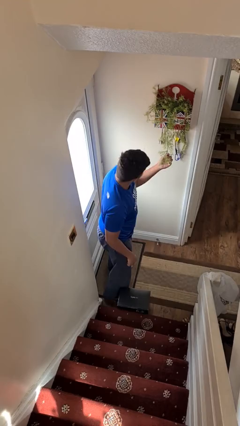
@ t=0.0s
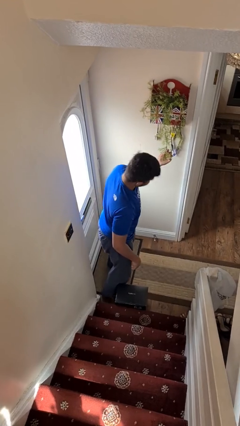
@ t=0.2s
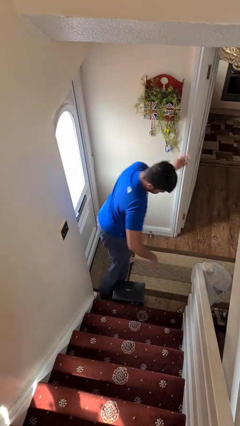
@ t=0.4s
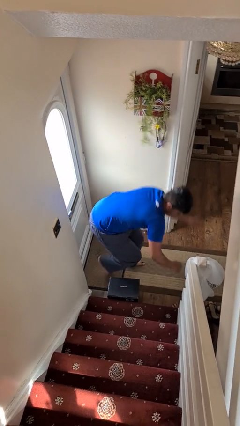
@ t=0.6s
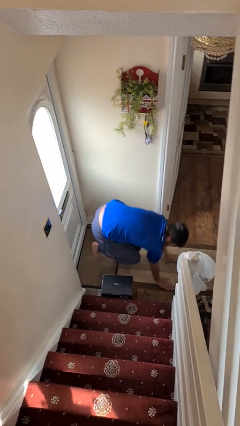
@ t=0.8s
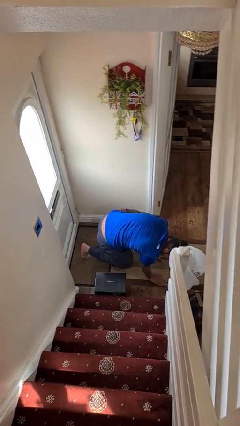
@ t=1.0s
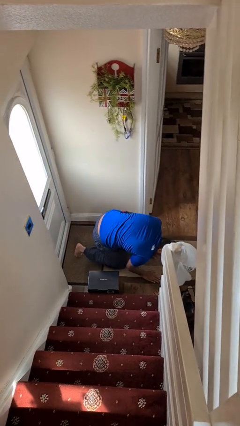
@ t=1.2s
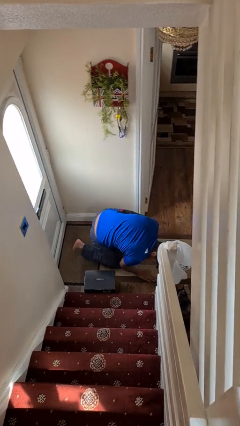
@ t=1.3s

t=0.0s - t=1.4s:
person trips on object on floor

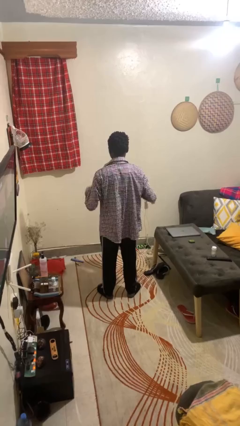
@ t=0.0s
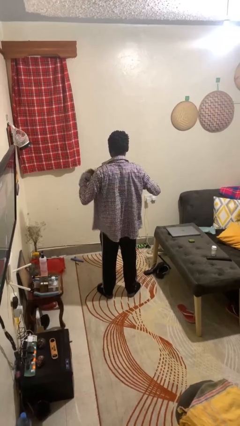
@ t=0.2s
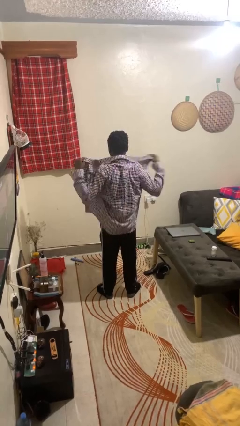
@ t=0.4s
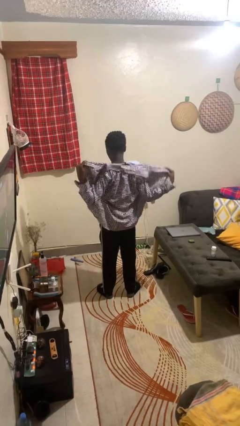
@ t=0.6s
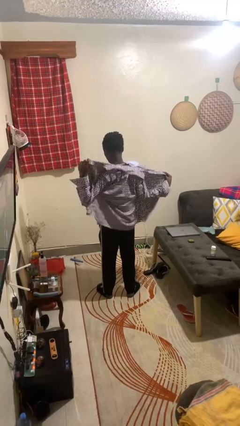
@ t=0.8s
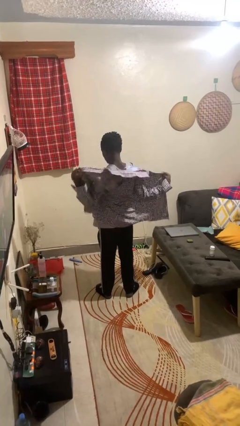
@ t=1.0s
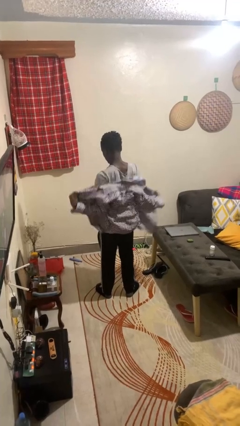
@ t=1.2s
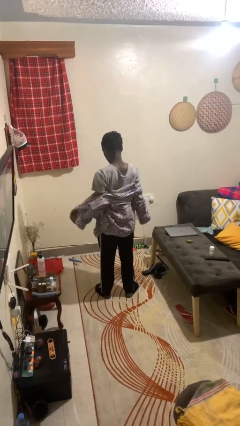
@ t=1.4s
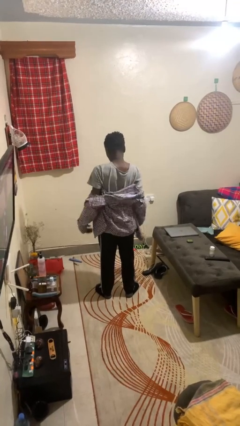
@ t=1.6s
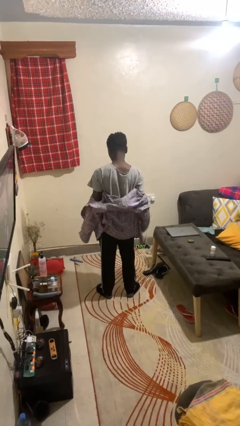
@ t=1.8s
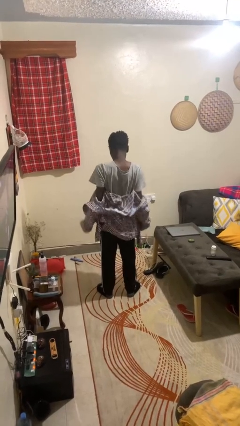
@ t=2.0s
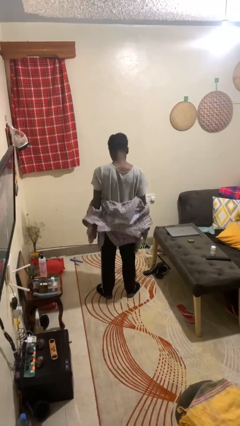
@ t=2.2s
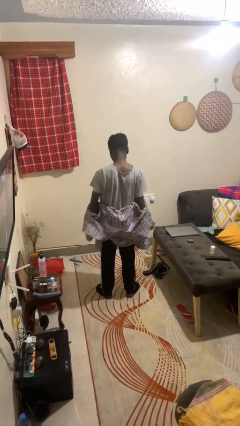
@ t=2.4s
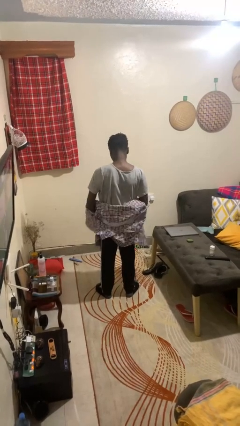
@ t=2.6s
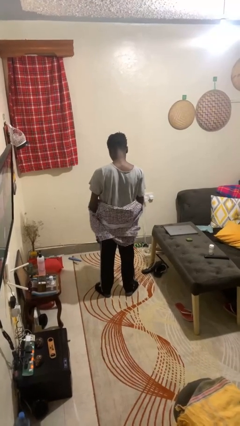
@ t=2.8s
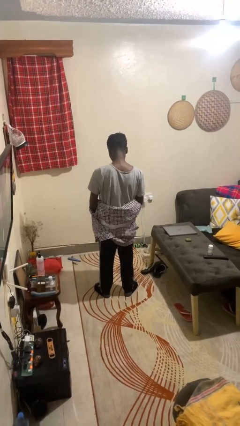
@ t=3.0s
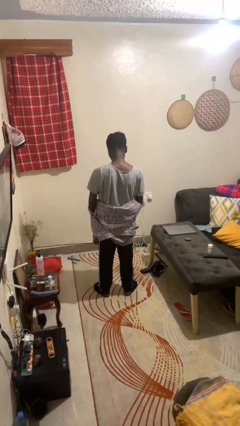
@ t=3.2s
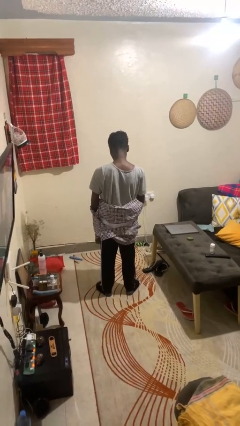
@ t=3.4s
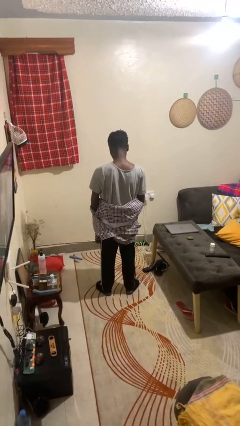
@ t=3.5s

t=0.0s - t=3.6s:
person takes off shirt

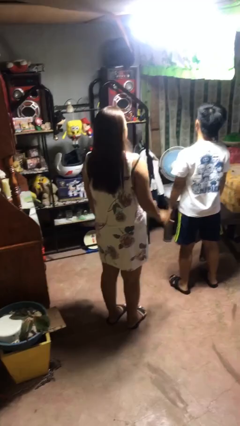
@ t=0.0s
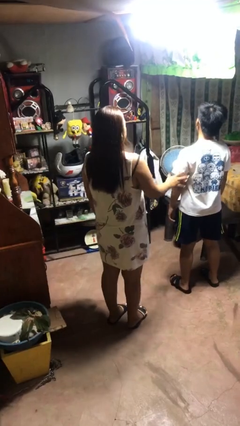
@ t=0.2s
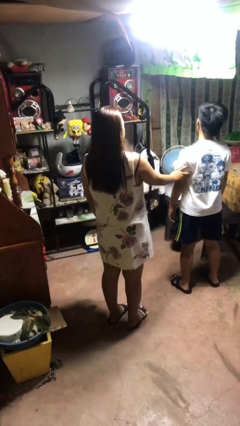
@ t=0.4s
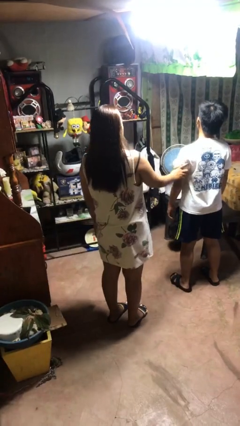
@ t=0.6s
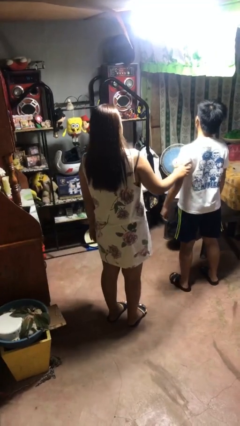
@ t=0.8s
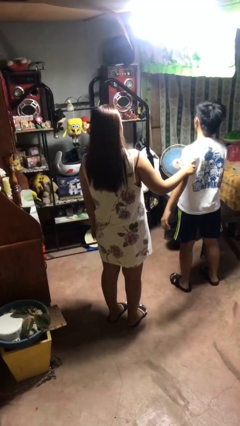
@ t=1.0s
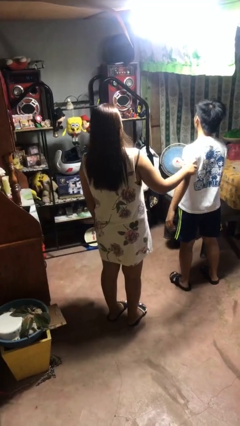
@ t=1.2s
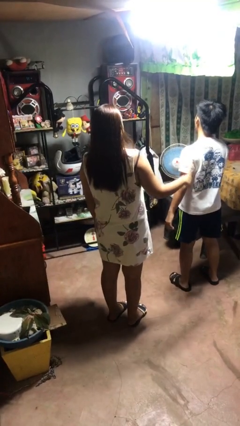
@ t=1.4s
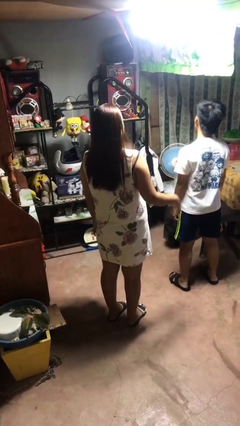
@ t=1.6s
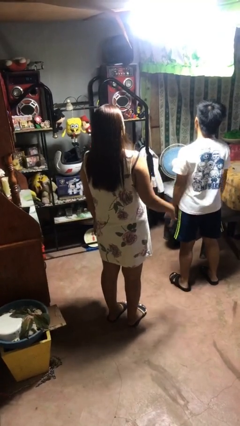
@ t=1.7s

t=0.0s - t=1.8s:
person grabs person by bicep

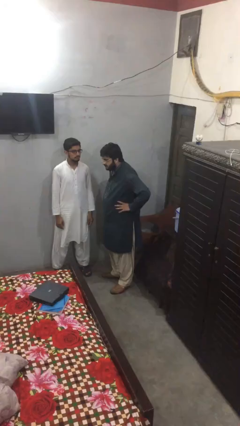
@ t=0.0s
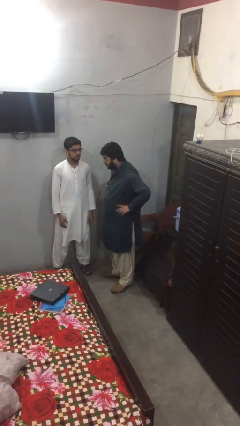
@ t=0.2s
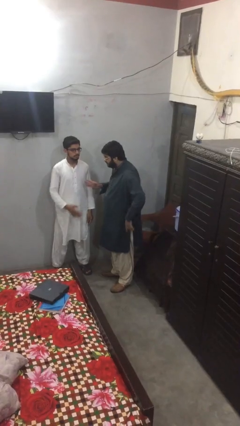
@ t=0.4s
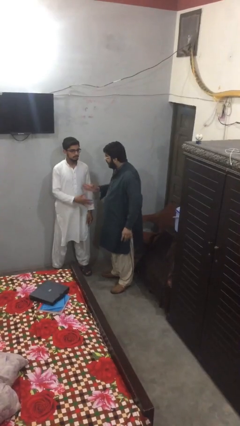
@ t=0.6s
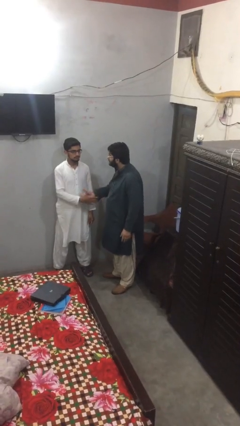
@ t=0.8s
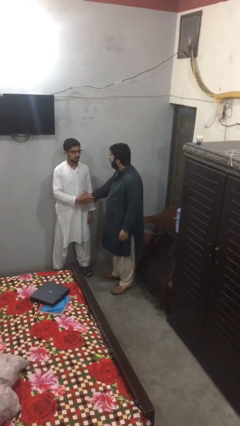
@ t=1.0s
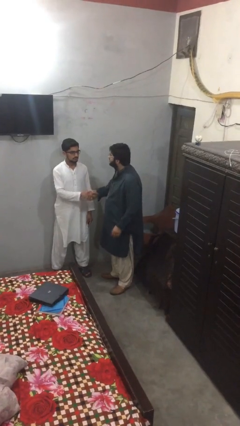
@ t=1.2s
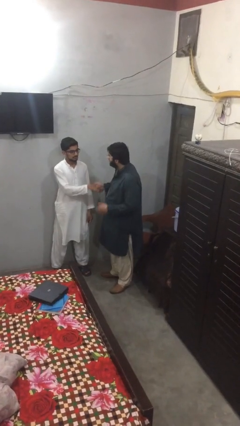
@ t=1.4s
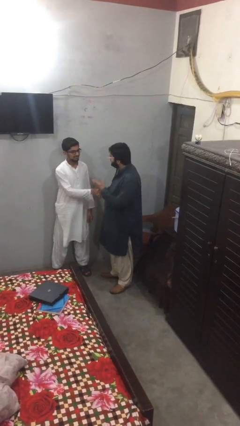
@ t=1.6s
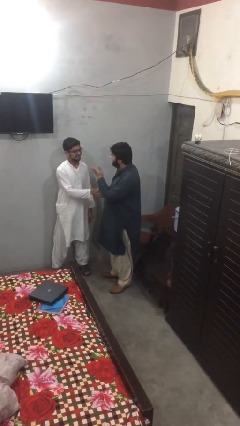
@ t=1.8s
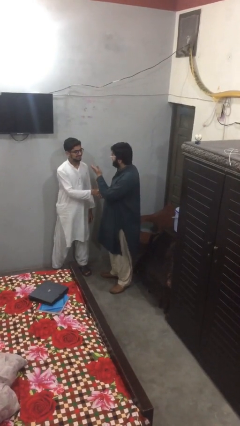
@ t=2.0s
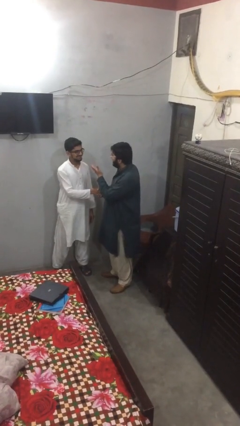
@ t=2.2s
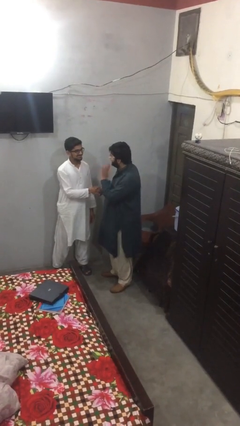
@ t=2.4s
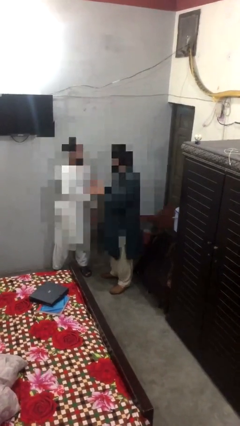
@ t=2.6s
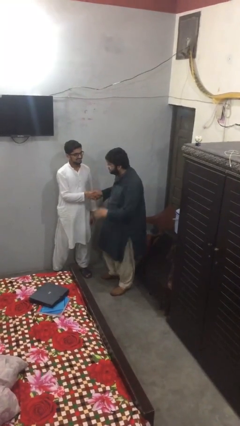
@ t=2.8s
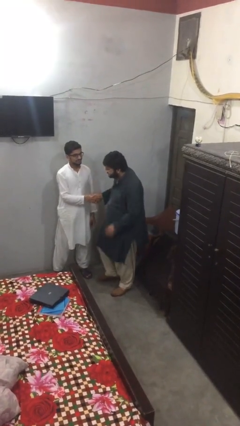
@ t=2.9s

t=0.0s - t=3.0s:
person shakes hand

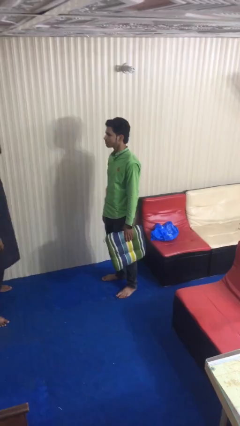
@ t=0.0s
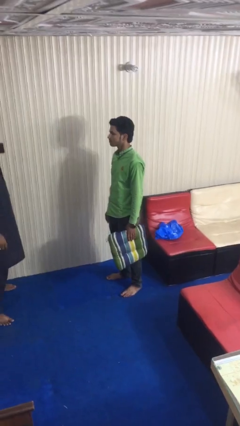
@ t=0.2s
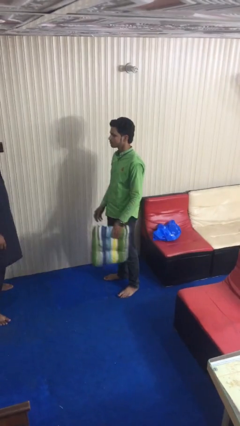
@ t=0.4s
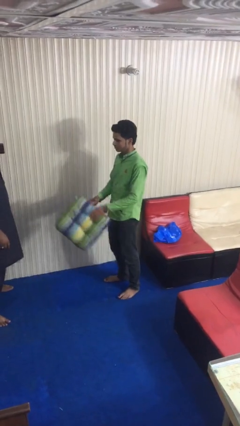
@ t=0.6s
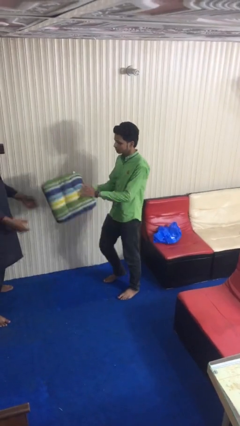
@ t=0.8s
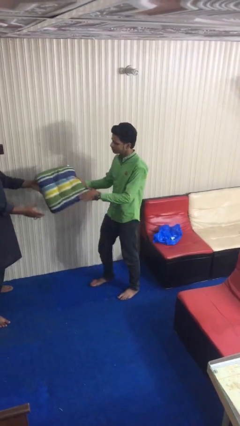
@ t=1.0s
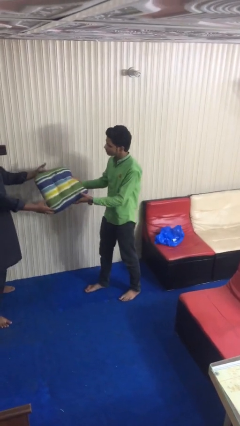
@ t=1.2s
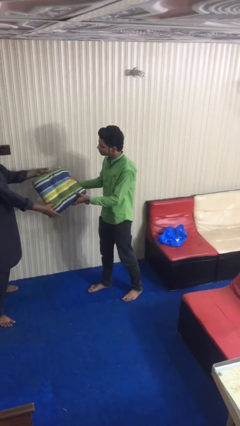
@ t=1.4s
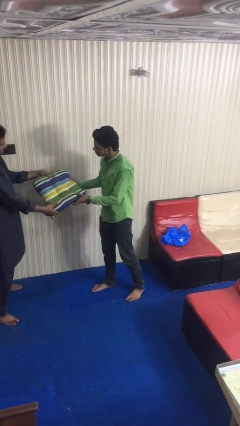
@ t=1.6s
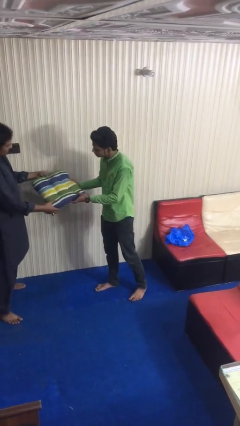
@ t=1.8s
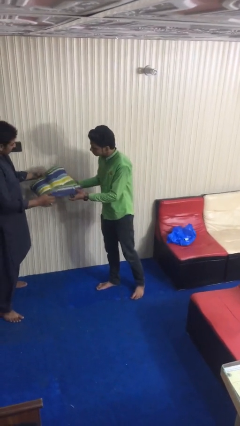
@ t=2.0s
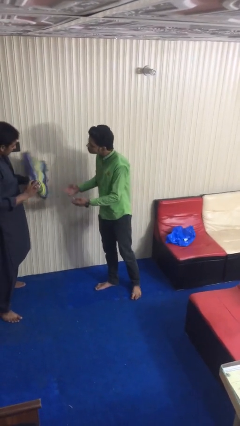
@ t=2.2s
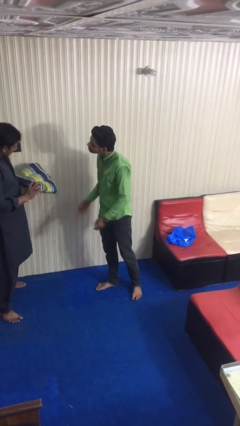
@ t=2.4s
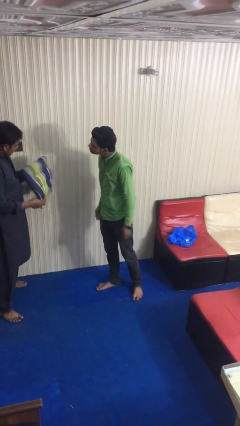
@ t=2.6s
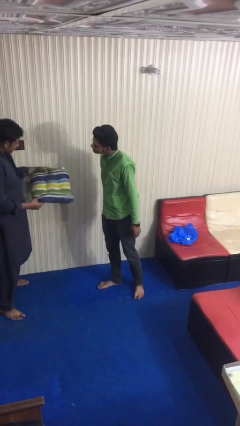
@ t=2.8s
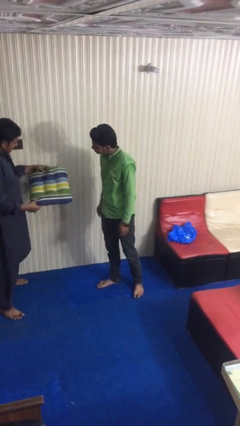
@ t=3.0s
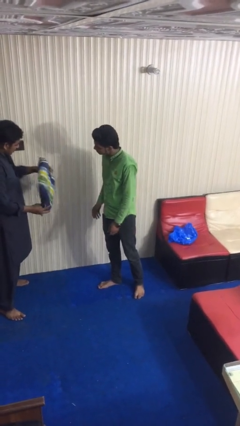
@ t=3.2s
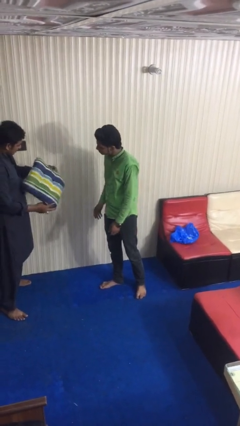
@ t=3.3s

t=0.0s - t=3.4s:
person transfers object to person

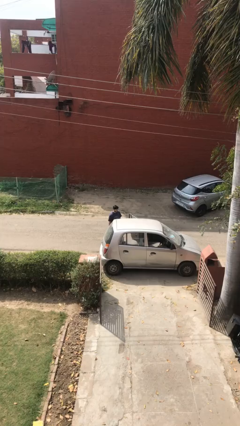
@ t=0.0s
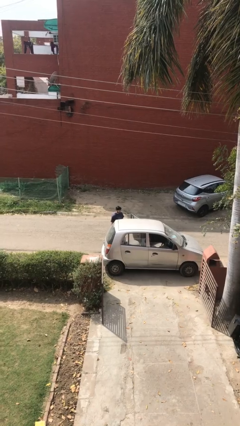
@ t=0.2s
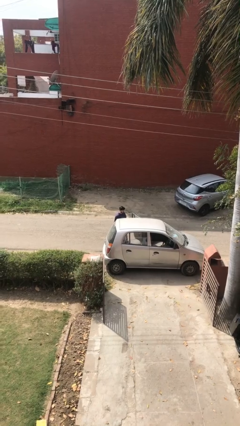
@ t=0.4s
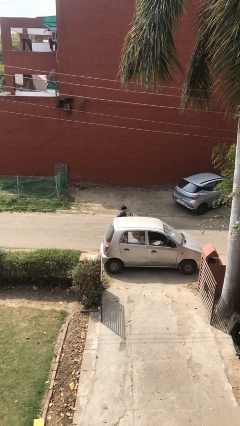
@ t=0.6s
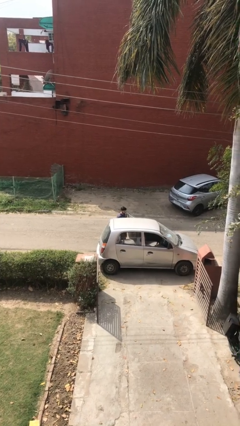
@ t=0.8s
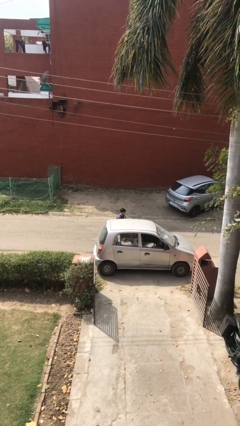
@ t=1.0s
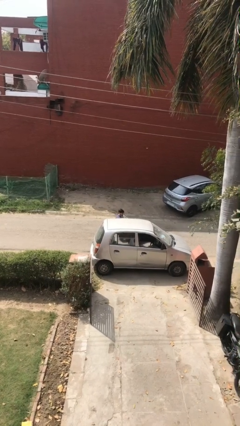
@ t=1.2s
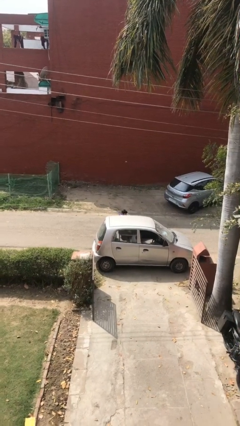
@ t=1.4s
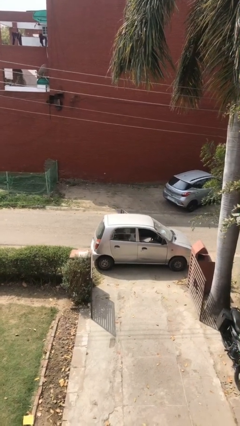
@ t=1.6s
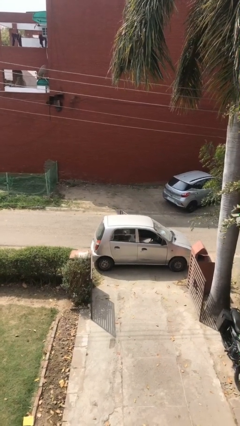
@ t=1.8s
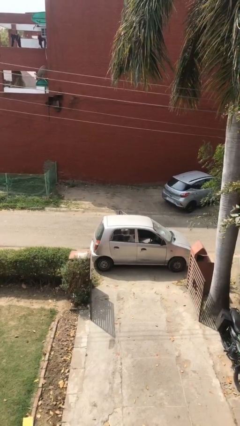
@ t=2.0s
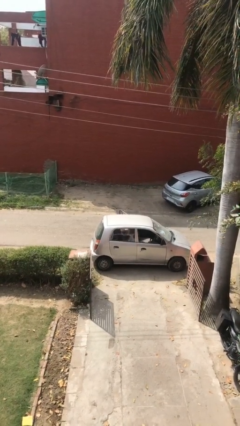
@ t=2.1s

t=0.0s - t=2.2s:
person enters car

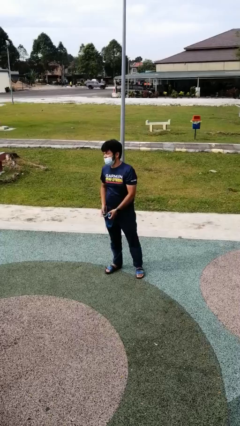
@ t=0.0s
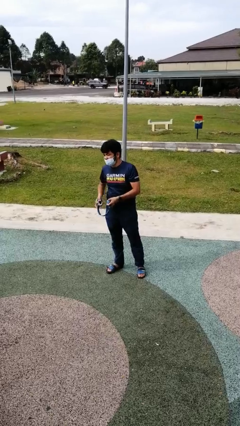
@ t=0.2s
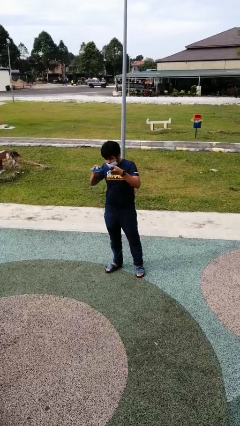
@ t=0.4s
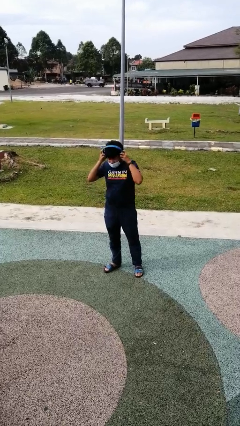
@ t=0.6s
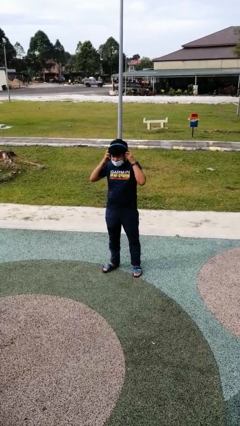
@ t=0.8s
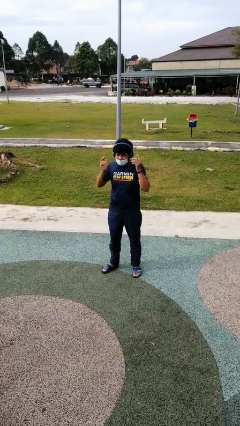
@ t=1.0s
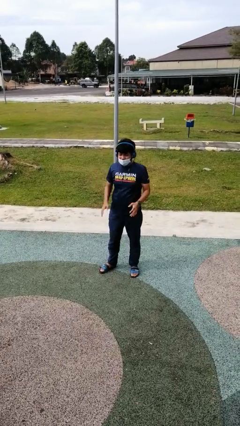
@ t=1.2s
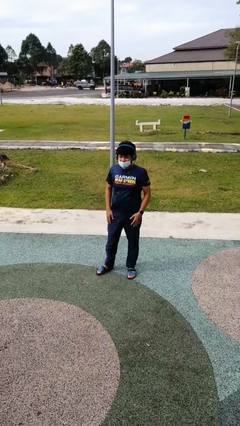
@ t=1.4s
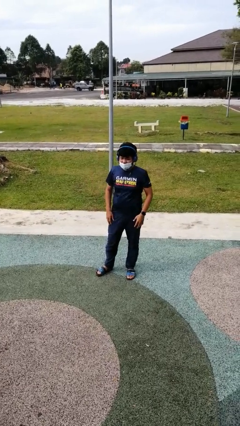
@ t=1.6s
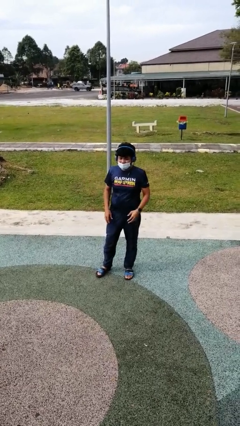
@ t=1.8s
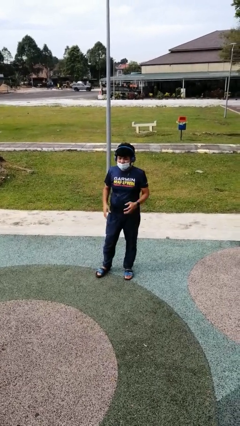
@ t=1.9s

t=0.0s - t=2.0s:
person puts on headphones
